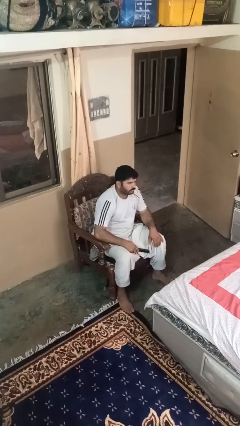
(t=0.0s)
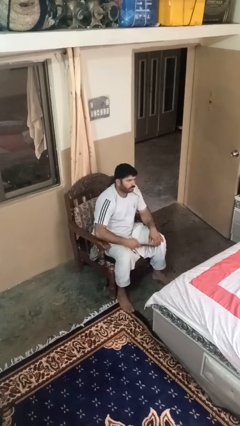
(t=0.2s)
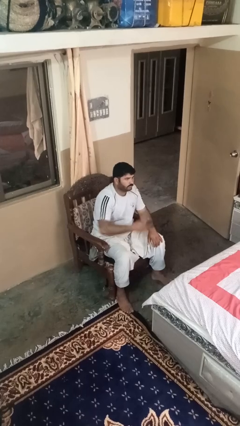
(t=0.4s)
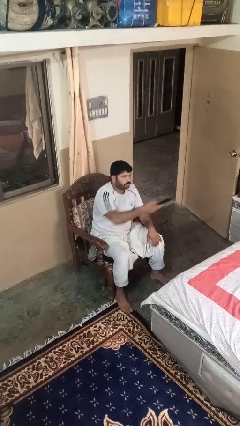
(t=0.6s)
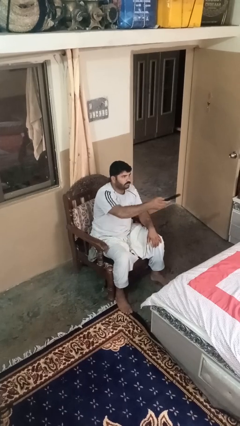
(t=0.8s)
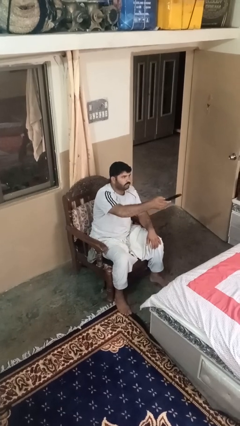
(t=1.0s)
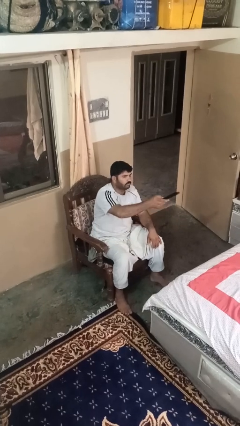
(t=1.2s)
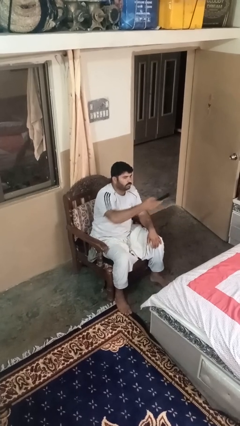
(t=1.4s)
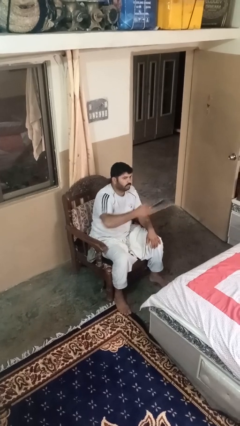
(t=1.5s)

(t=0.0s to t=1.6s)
person uses television remote

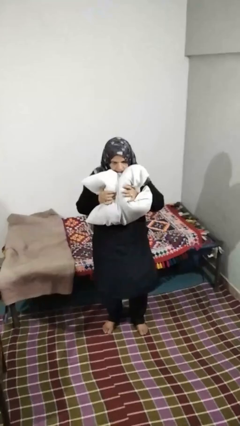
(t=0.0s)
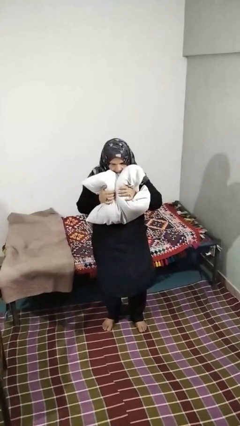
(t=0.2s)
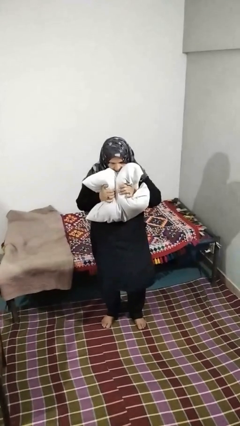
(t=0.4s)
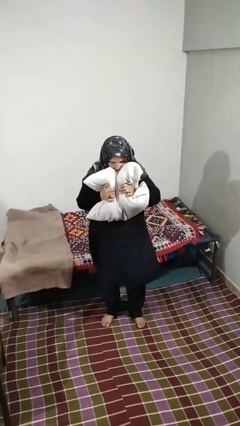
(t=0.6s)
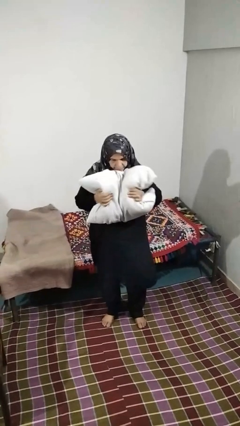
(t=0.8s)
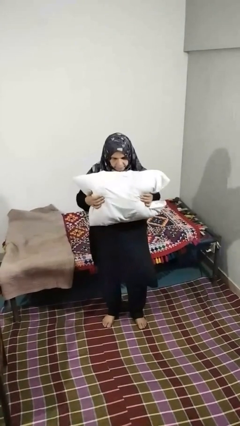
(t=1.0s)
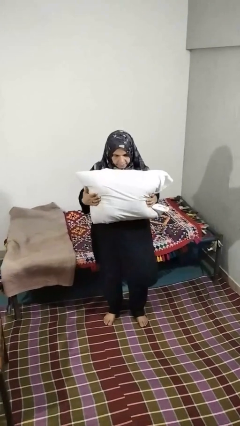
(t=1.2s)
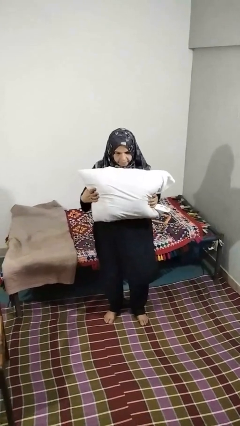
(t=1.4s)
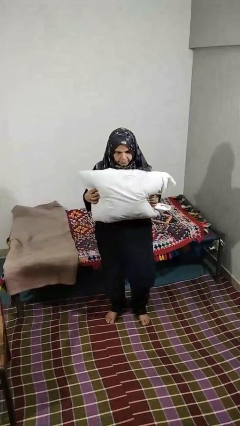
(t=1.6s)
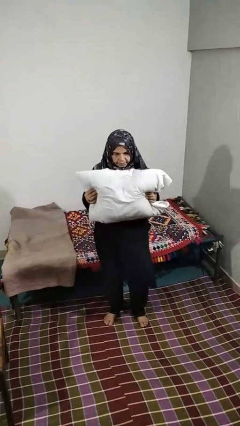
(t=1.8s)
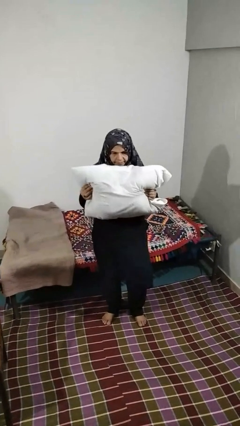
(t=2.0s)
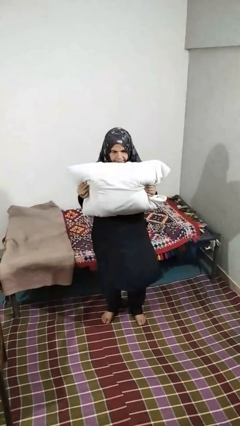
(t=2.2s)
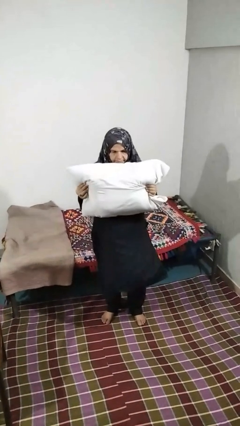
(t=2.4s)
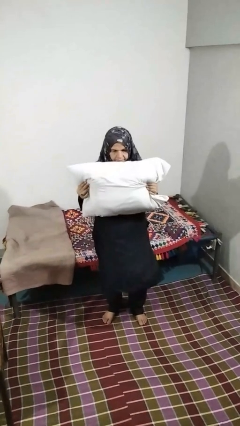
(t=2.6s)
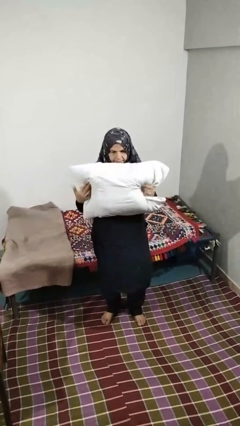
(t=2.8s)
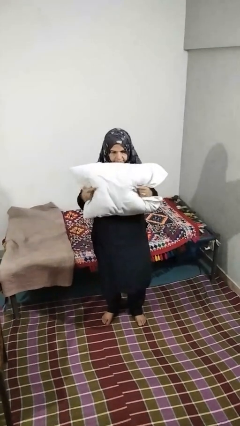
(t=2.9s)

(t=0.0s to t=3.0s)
person squeezes object

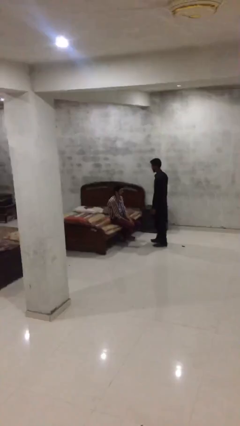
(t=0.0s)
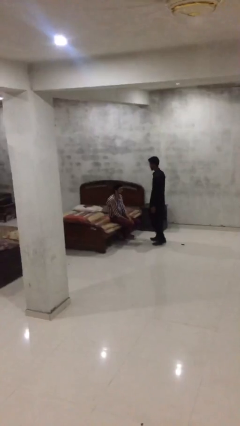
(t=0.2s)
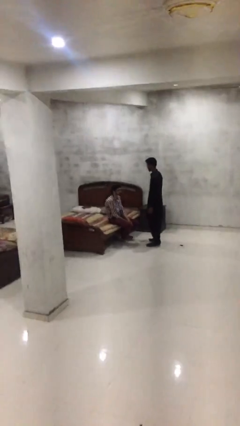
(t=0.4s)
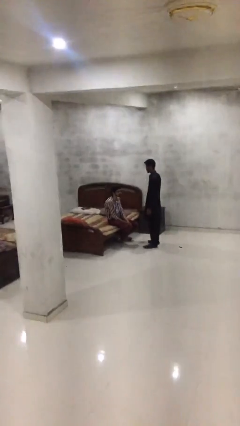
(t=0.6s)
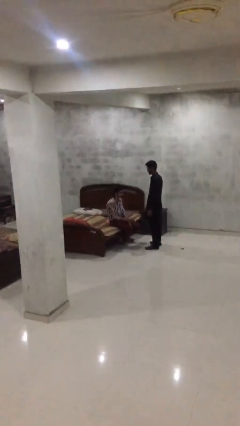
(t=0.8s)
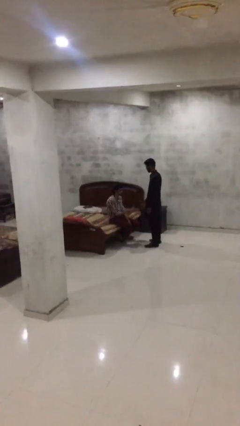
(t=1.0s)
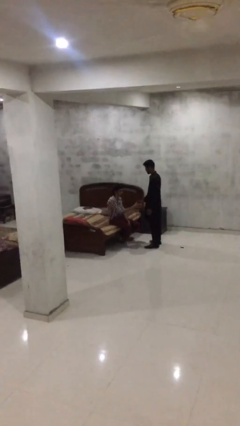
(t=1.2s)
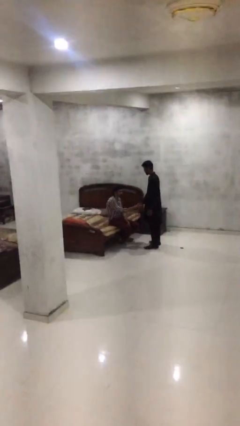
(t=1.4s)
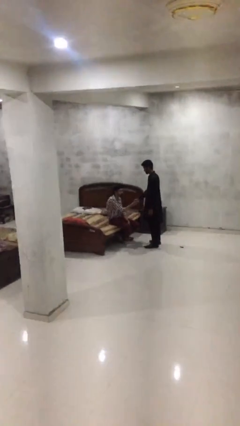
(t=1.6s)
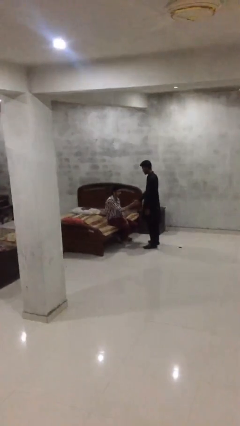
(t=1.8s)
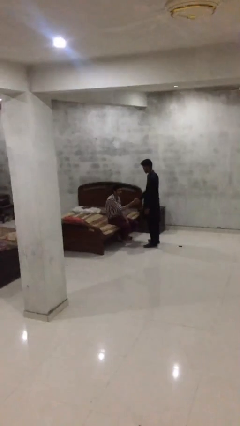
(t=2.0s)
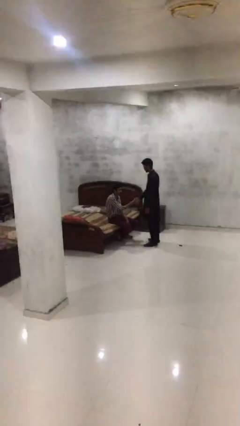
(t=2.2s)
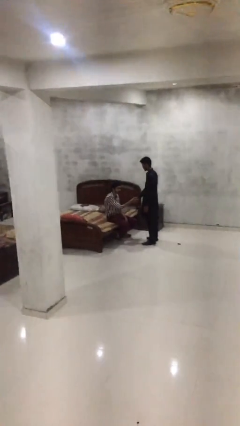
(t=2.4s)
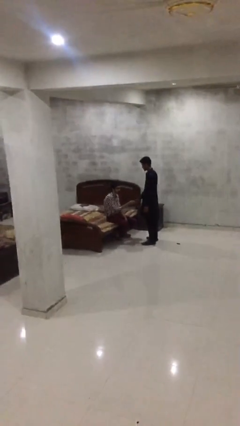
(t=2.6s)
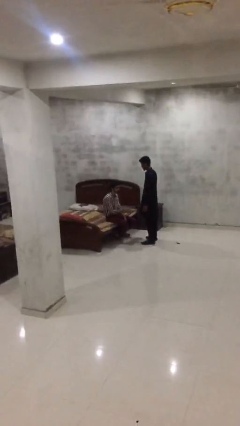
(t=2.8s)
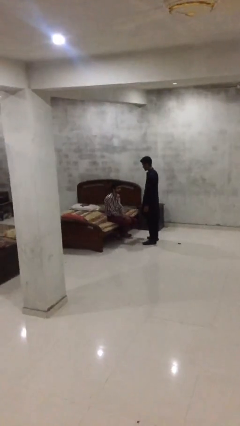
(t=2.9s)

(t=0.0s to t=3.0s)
person shakes hand

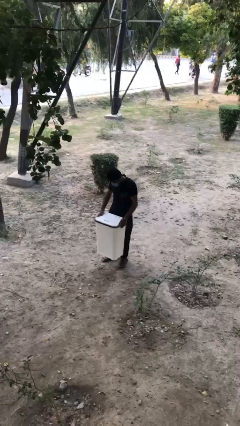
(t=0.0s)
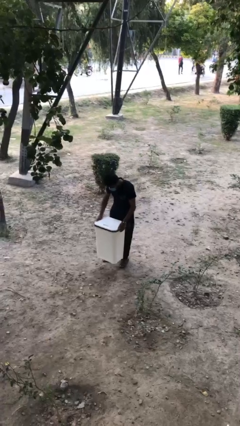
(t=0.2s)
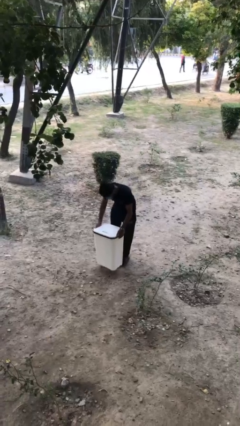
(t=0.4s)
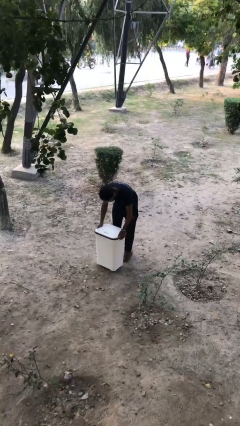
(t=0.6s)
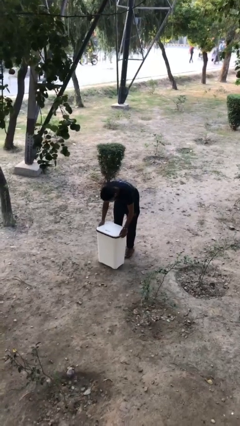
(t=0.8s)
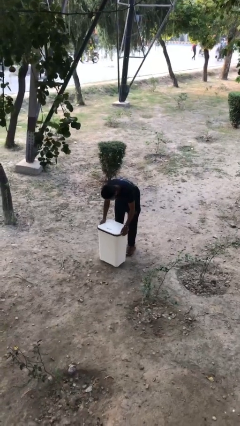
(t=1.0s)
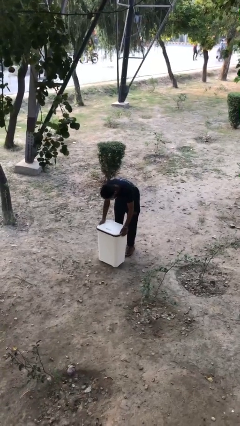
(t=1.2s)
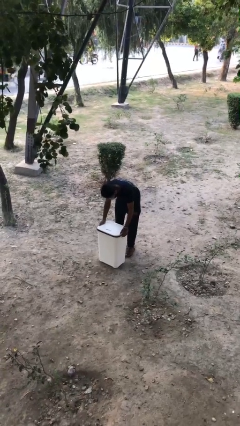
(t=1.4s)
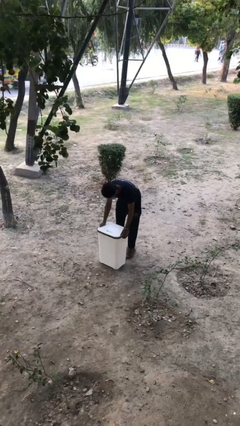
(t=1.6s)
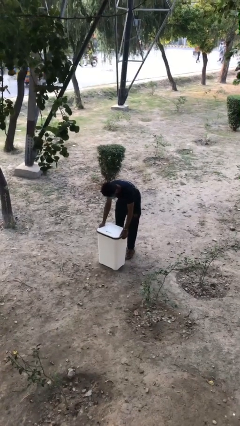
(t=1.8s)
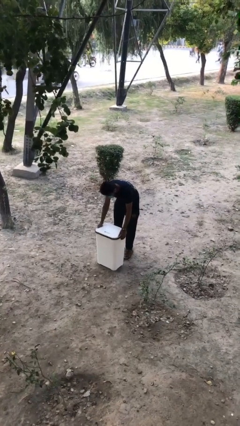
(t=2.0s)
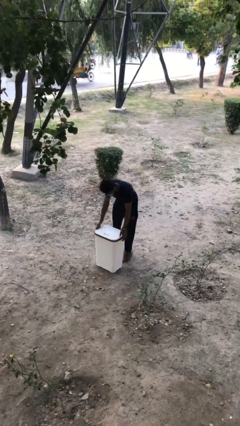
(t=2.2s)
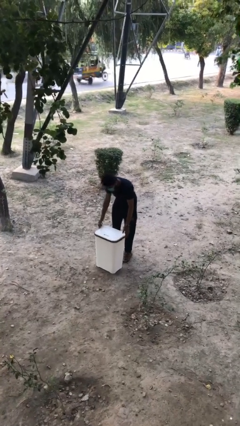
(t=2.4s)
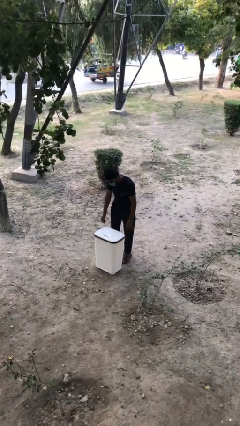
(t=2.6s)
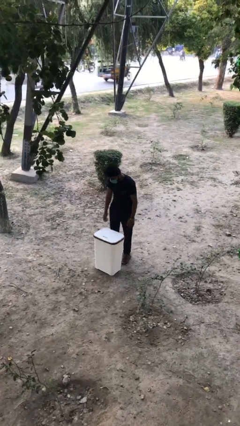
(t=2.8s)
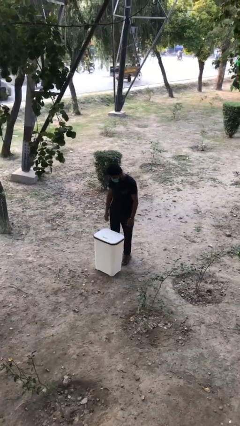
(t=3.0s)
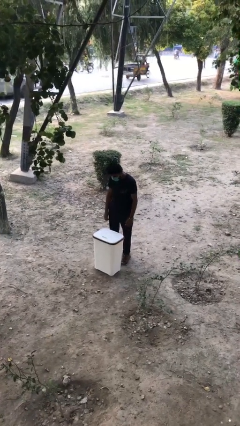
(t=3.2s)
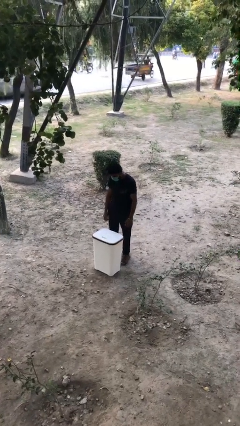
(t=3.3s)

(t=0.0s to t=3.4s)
person puts down object on floor

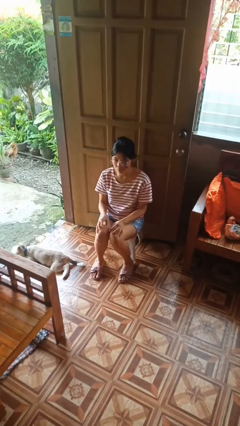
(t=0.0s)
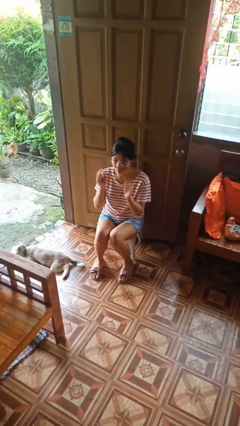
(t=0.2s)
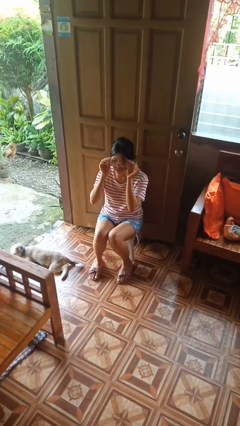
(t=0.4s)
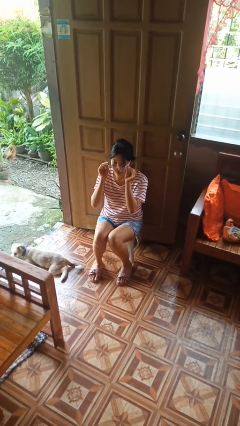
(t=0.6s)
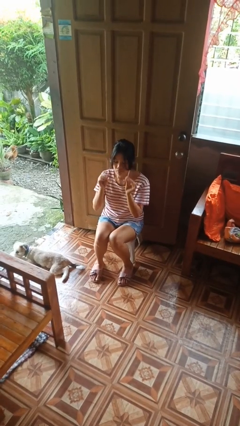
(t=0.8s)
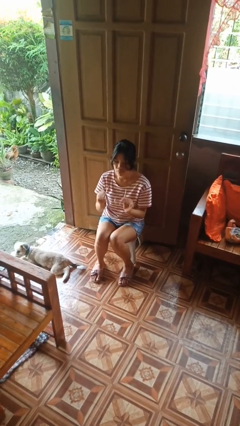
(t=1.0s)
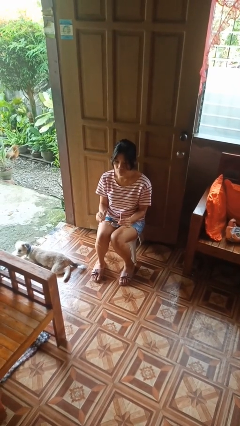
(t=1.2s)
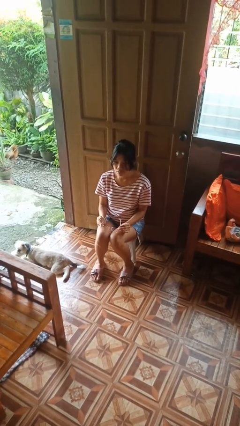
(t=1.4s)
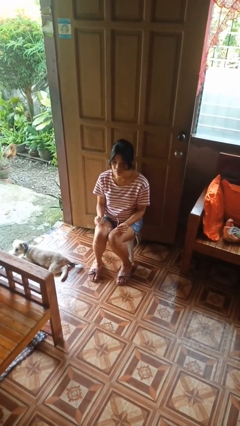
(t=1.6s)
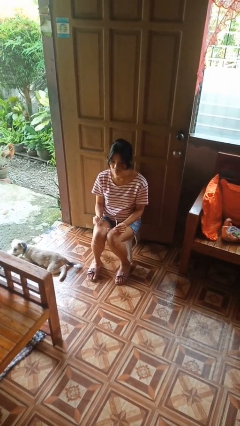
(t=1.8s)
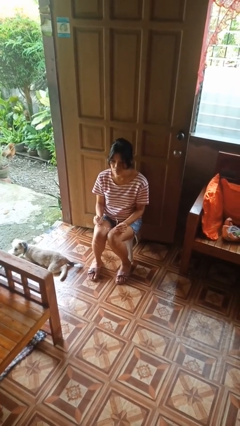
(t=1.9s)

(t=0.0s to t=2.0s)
person takes off glasses

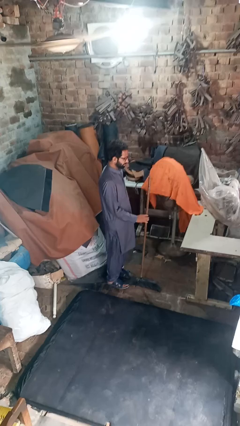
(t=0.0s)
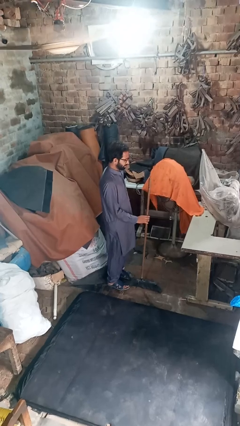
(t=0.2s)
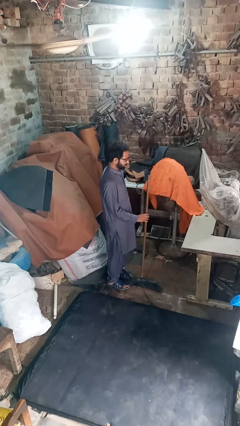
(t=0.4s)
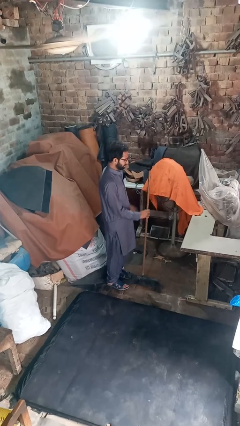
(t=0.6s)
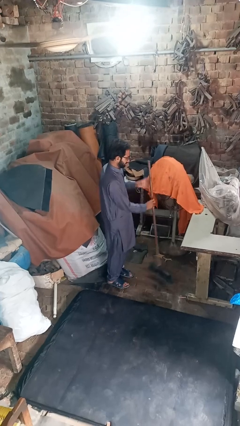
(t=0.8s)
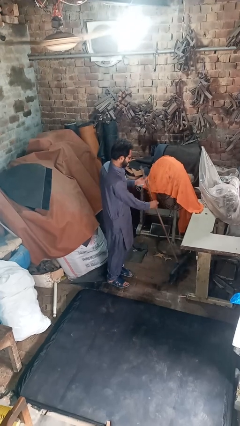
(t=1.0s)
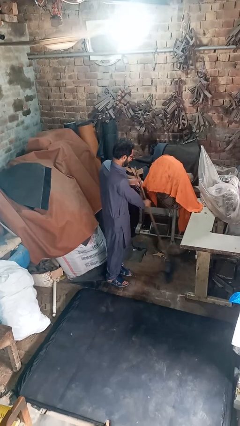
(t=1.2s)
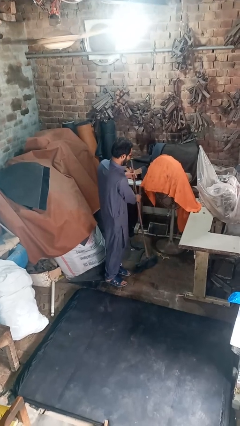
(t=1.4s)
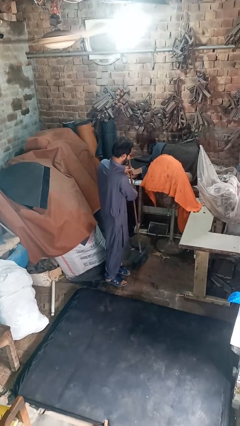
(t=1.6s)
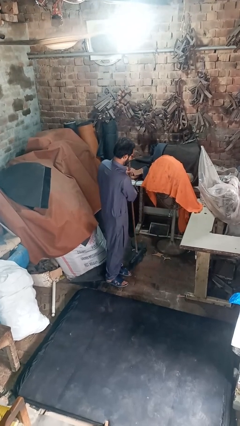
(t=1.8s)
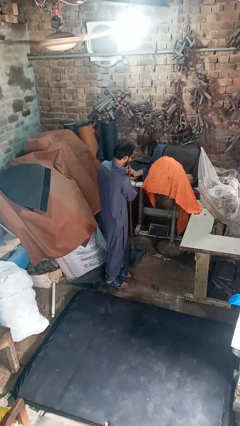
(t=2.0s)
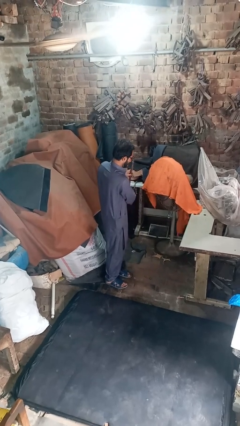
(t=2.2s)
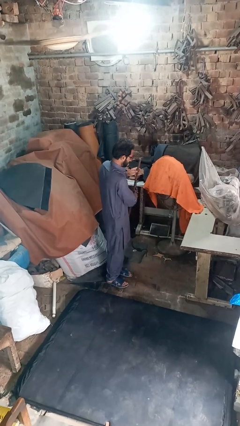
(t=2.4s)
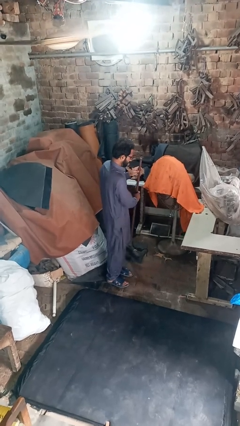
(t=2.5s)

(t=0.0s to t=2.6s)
person sweeps floor

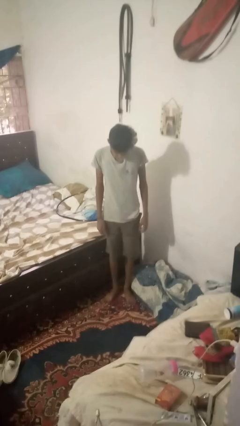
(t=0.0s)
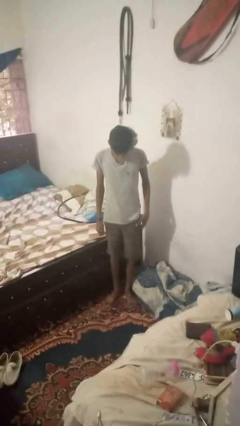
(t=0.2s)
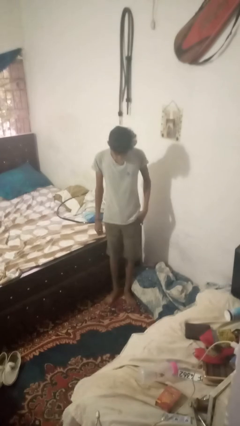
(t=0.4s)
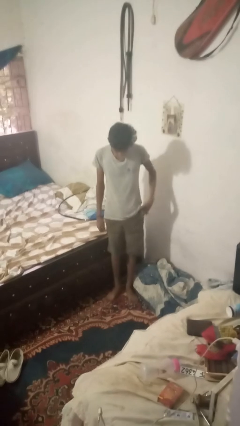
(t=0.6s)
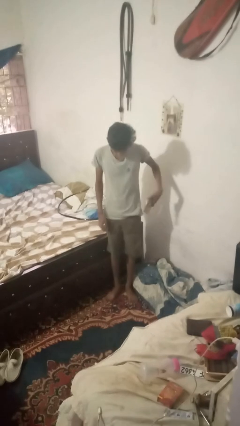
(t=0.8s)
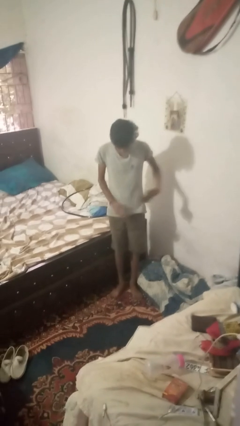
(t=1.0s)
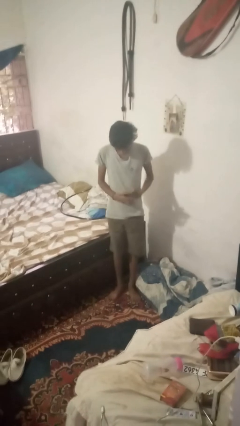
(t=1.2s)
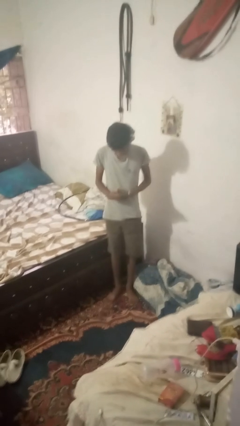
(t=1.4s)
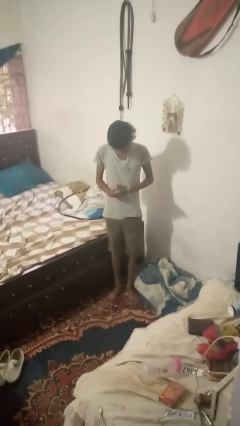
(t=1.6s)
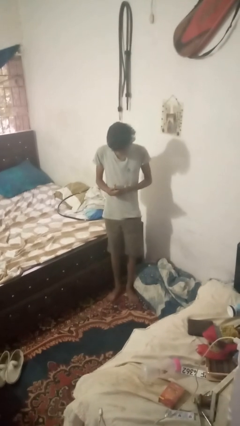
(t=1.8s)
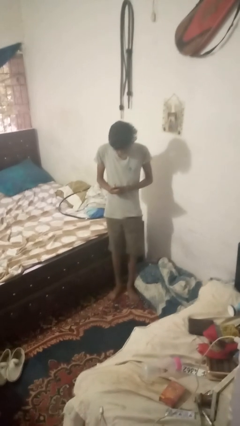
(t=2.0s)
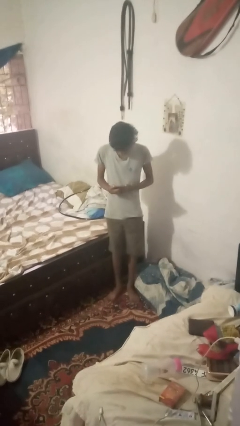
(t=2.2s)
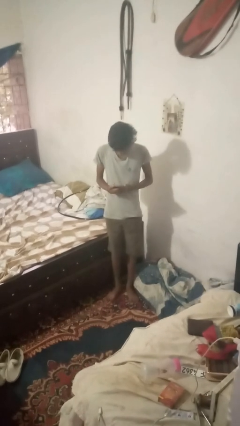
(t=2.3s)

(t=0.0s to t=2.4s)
person takes phone from pocket
